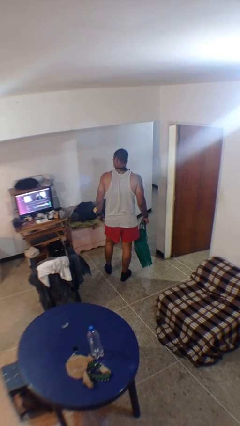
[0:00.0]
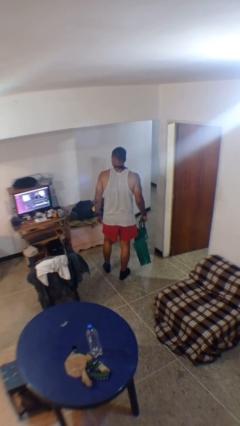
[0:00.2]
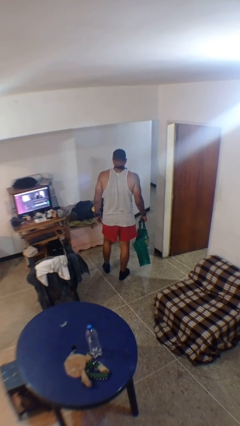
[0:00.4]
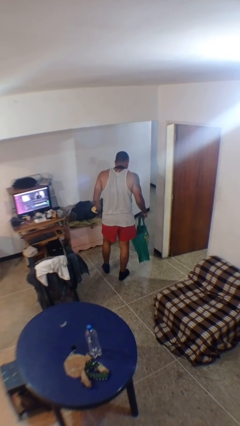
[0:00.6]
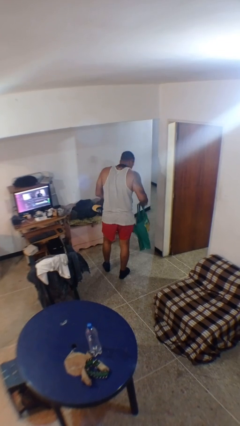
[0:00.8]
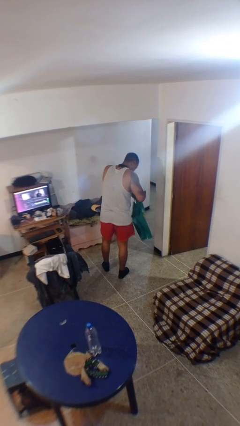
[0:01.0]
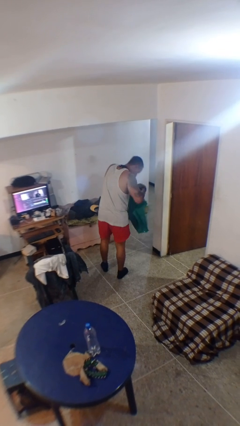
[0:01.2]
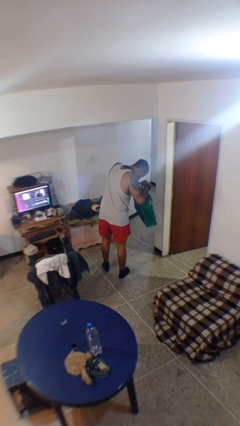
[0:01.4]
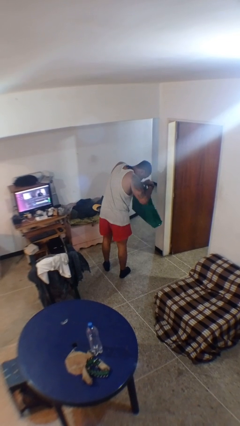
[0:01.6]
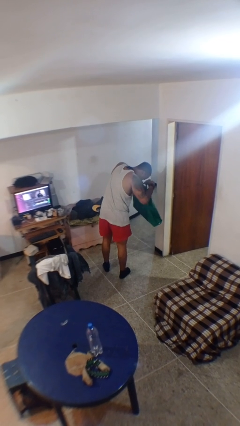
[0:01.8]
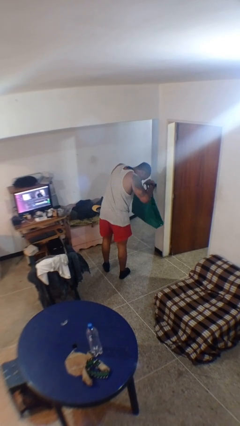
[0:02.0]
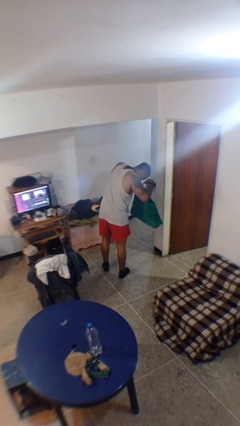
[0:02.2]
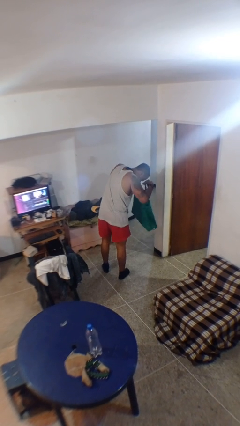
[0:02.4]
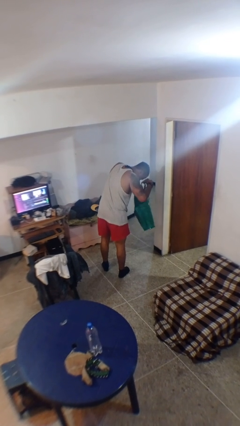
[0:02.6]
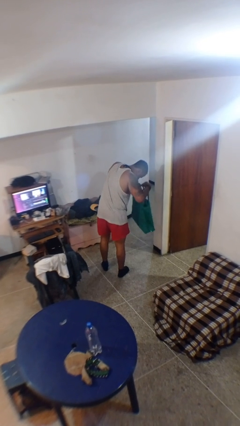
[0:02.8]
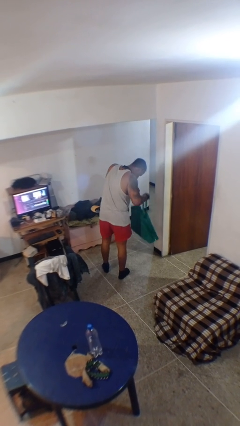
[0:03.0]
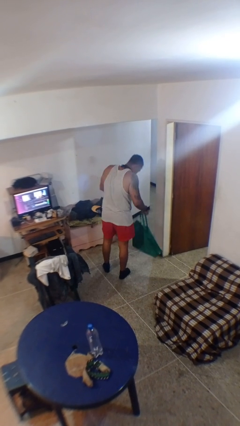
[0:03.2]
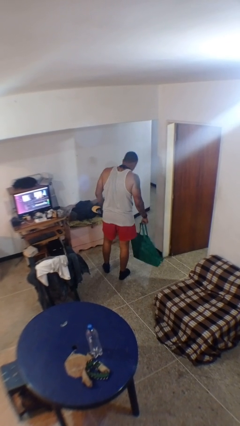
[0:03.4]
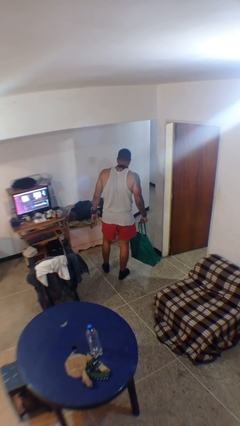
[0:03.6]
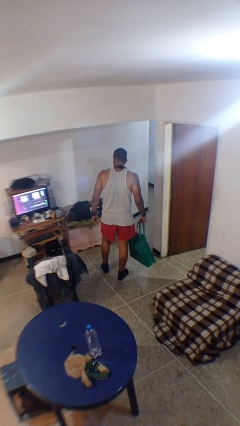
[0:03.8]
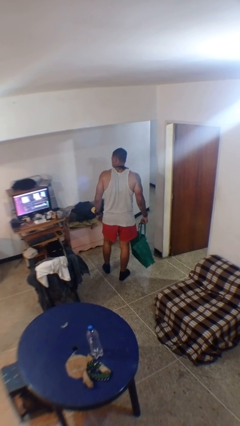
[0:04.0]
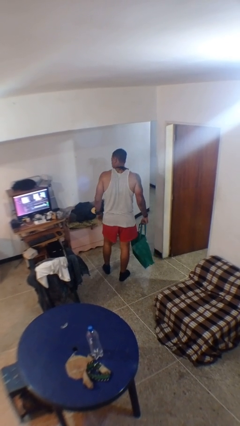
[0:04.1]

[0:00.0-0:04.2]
person searches in bag

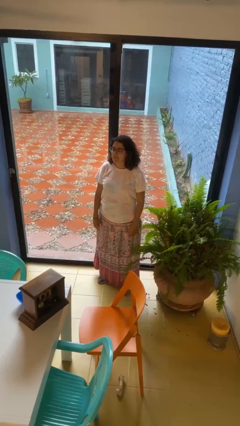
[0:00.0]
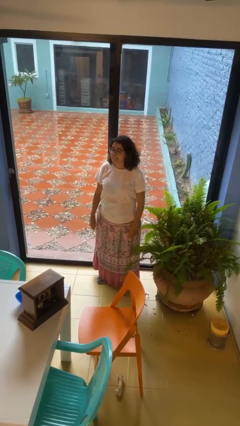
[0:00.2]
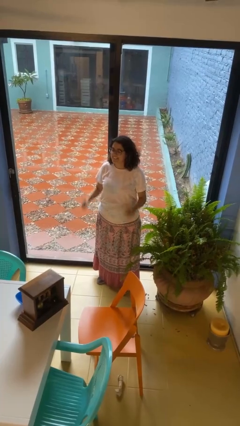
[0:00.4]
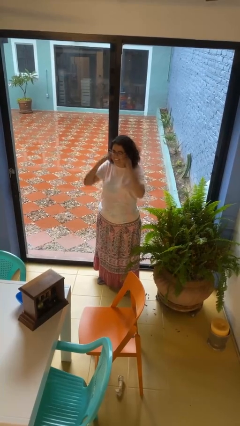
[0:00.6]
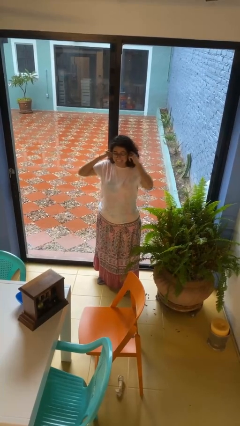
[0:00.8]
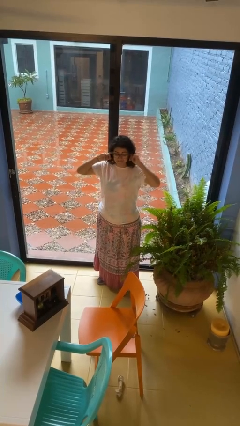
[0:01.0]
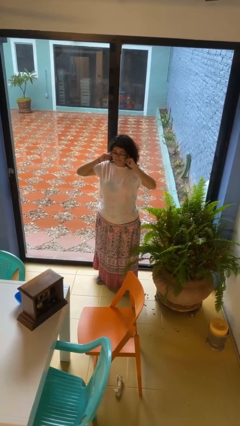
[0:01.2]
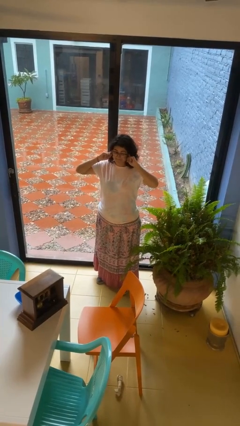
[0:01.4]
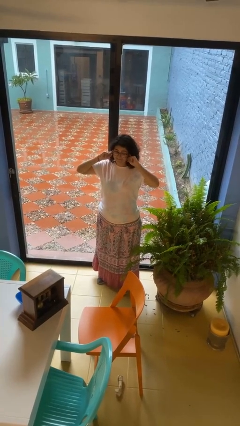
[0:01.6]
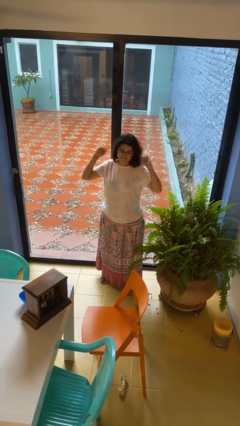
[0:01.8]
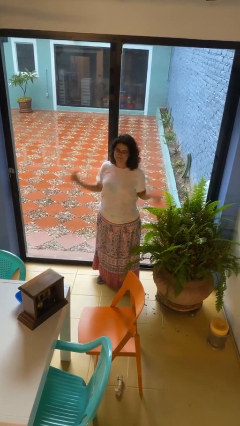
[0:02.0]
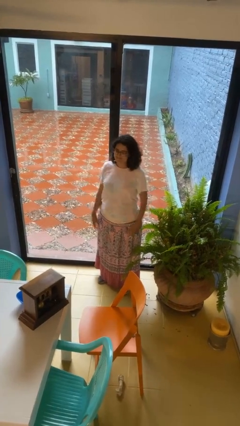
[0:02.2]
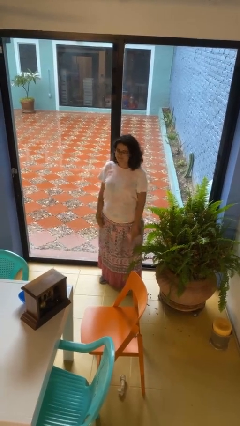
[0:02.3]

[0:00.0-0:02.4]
person puts fingers in ear

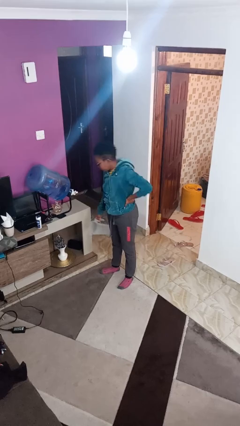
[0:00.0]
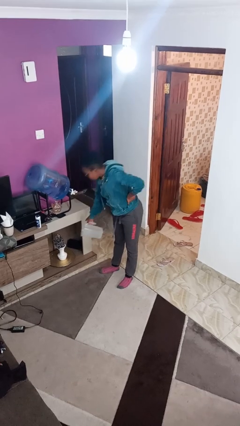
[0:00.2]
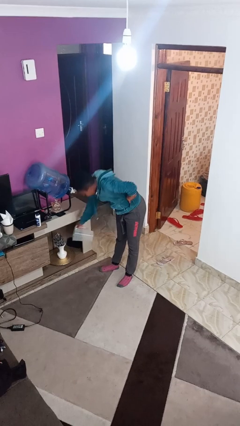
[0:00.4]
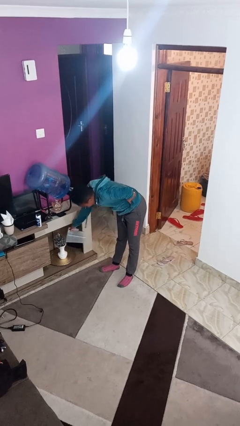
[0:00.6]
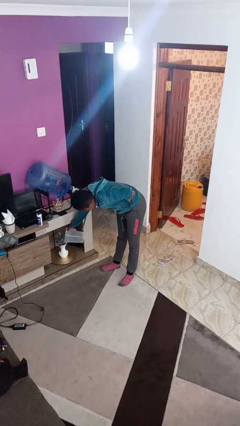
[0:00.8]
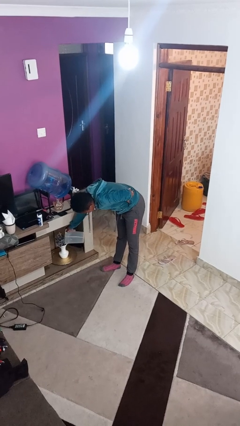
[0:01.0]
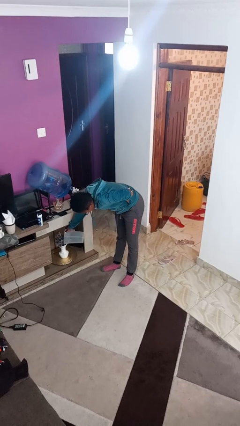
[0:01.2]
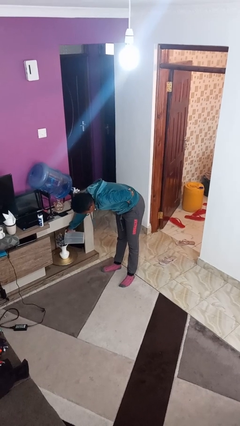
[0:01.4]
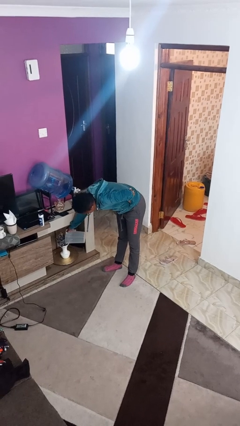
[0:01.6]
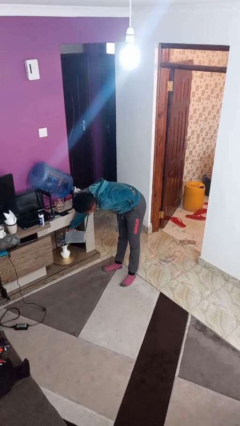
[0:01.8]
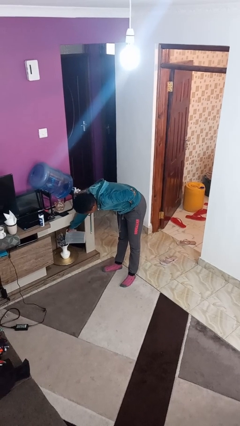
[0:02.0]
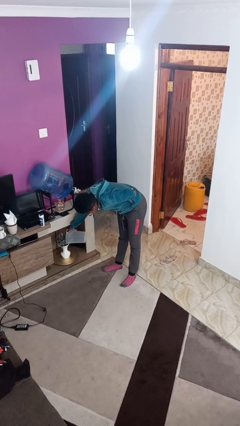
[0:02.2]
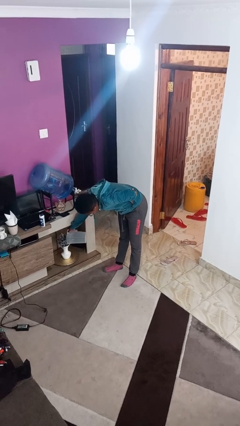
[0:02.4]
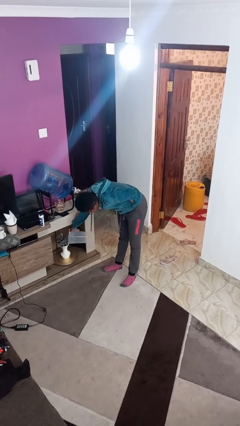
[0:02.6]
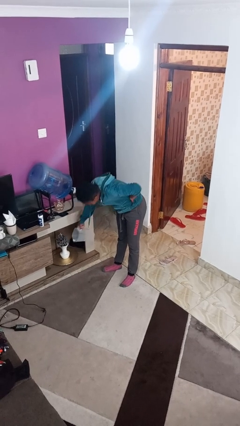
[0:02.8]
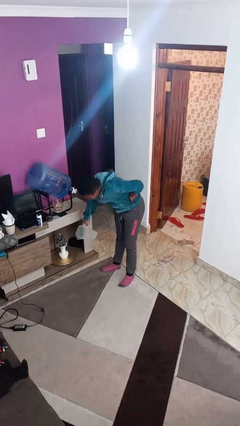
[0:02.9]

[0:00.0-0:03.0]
person waters houseplant

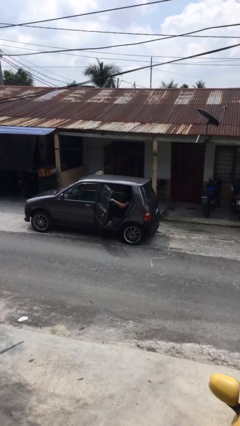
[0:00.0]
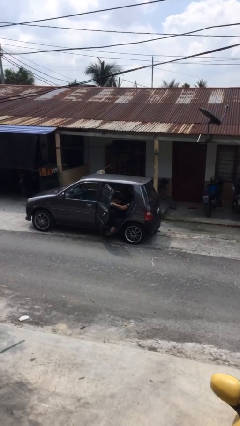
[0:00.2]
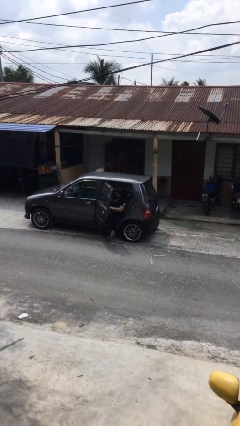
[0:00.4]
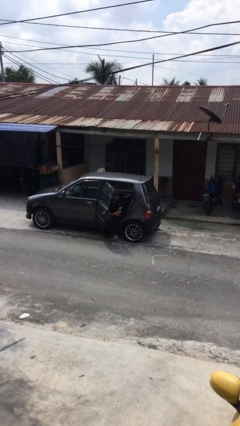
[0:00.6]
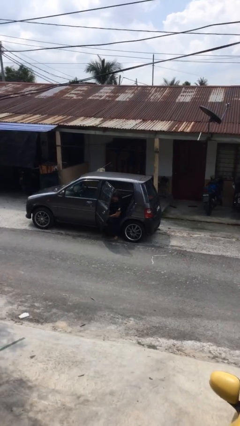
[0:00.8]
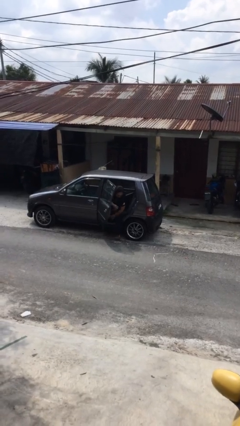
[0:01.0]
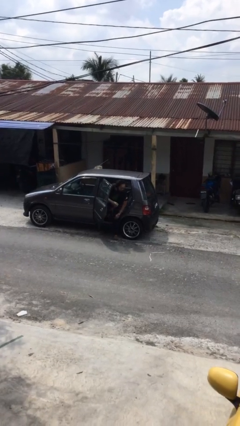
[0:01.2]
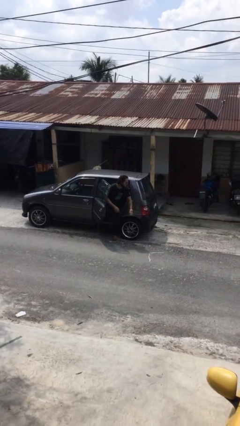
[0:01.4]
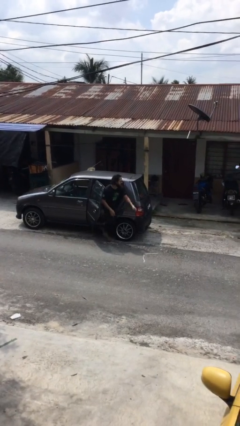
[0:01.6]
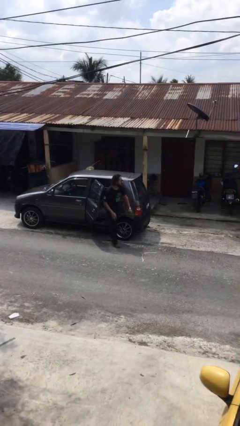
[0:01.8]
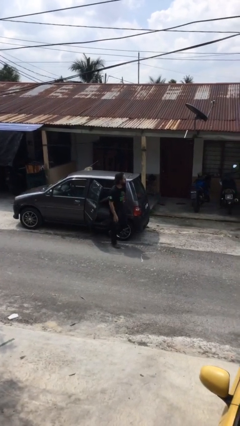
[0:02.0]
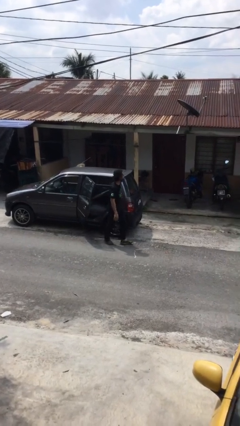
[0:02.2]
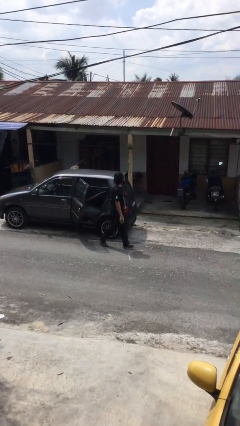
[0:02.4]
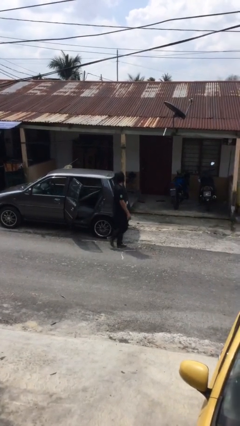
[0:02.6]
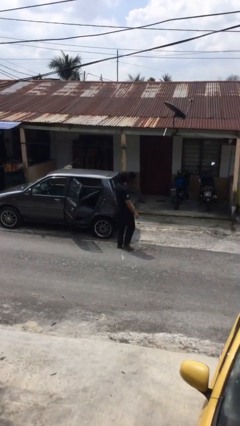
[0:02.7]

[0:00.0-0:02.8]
person exits car

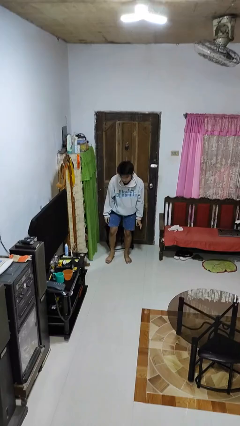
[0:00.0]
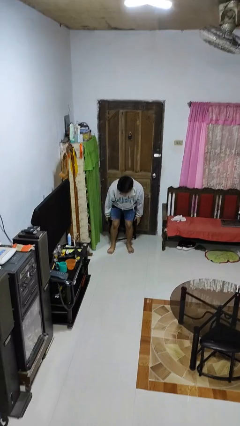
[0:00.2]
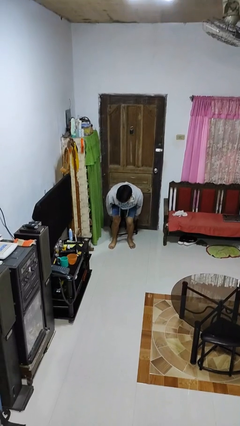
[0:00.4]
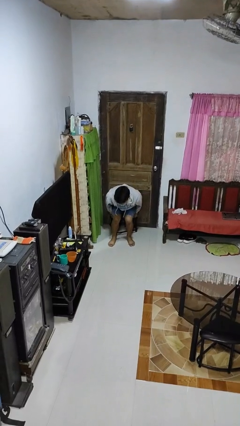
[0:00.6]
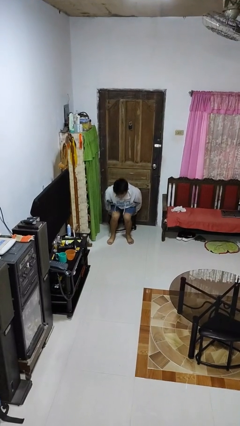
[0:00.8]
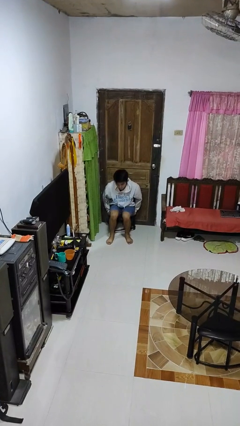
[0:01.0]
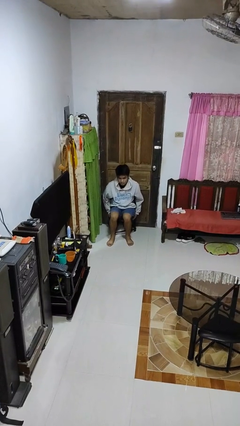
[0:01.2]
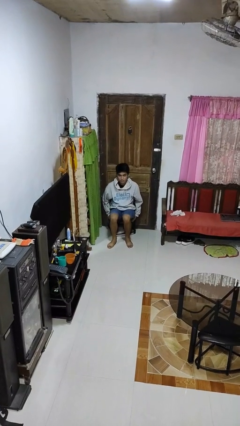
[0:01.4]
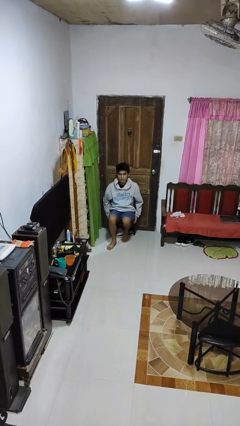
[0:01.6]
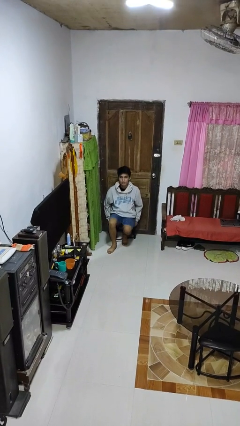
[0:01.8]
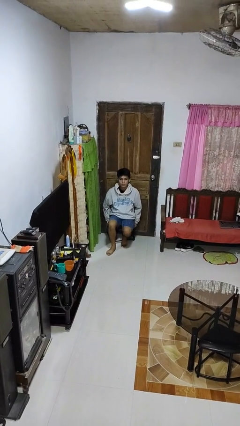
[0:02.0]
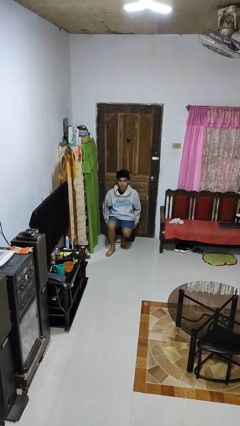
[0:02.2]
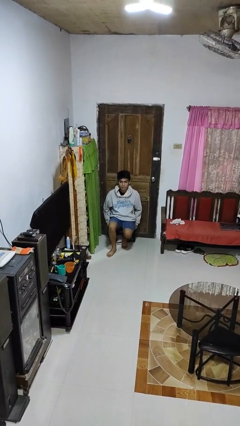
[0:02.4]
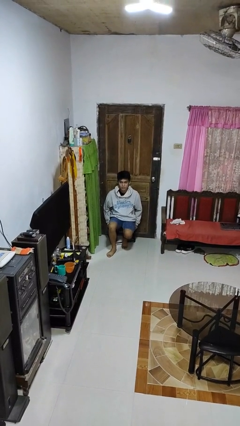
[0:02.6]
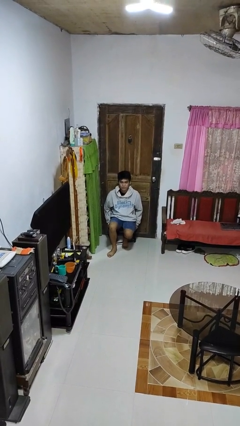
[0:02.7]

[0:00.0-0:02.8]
person sits down

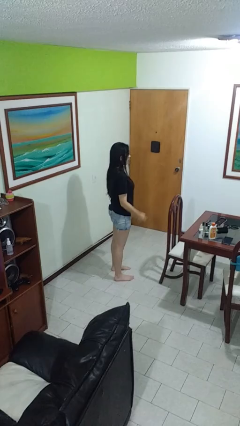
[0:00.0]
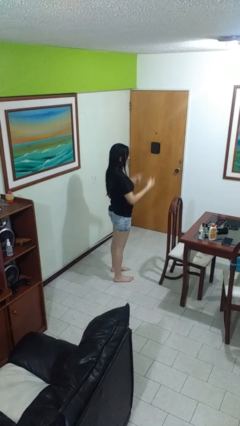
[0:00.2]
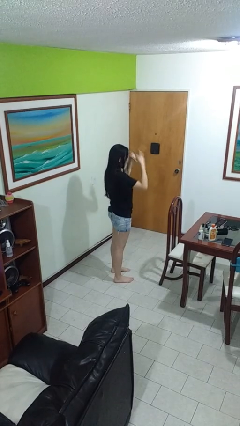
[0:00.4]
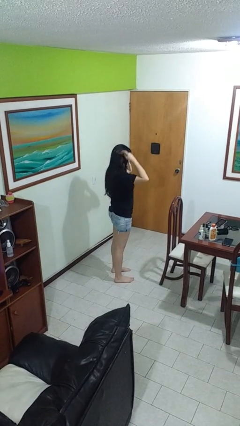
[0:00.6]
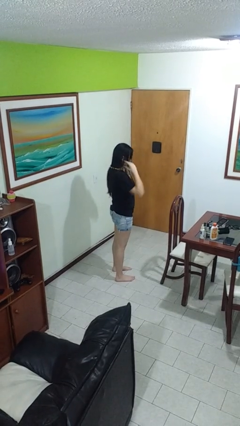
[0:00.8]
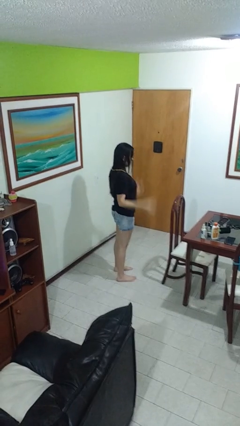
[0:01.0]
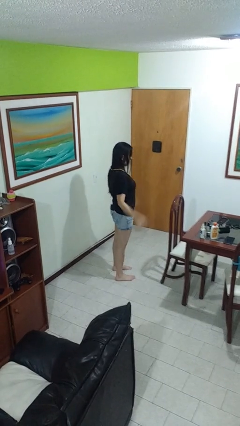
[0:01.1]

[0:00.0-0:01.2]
person puts on necklace

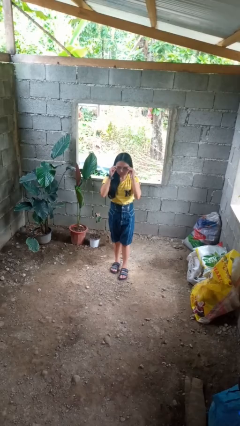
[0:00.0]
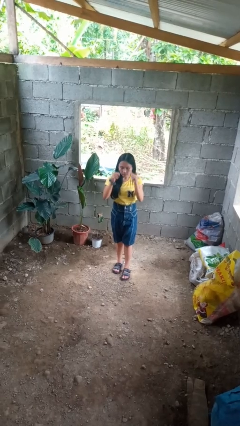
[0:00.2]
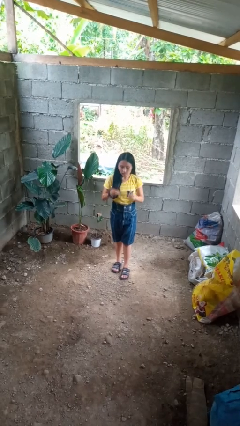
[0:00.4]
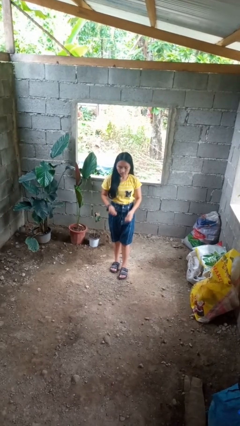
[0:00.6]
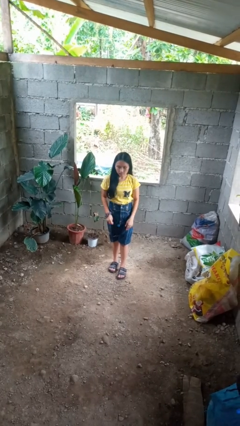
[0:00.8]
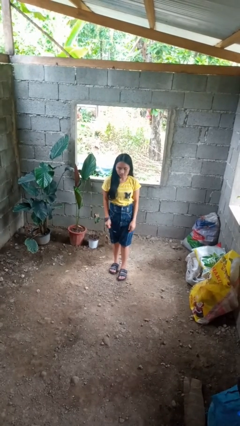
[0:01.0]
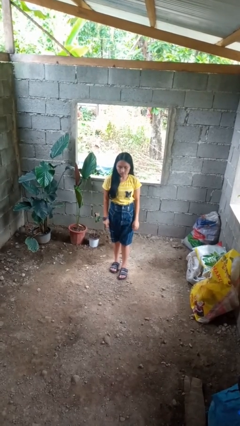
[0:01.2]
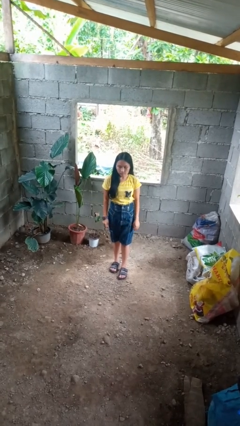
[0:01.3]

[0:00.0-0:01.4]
person takes off glasses
